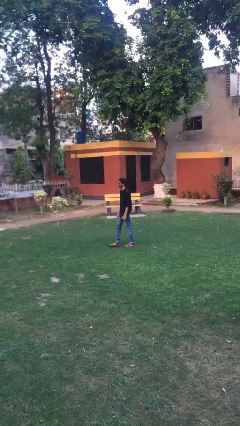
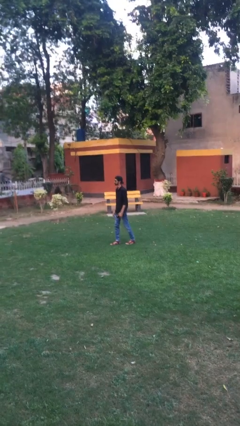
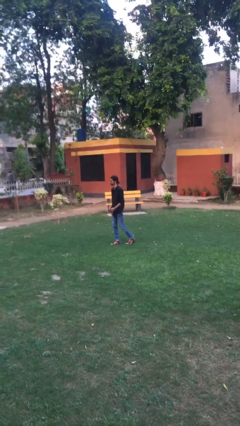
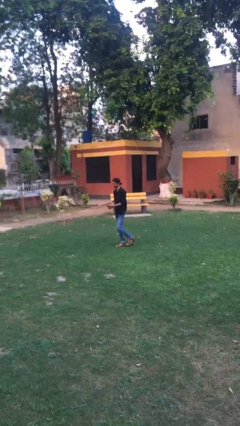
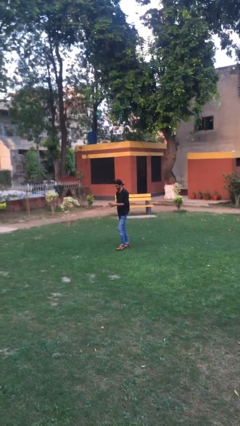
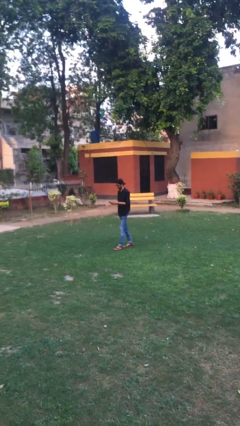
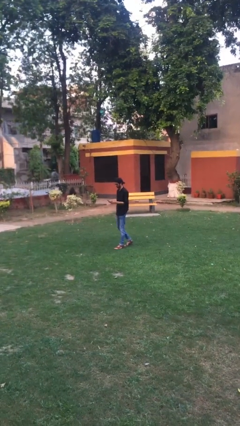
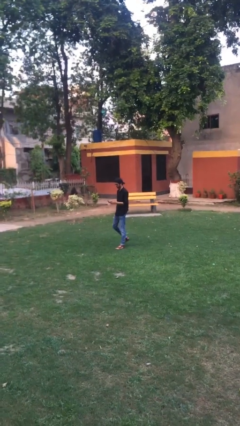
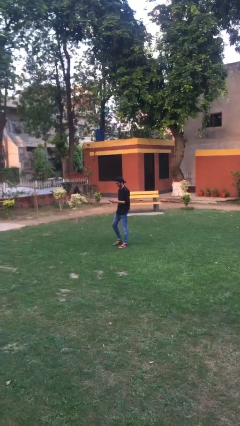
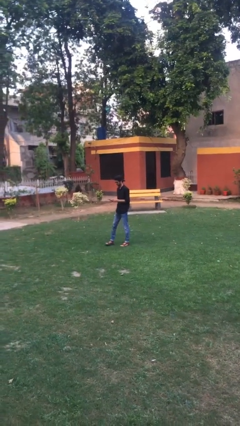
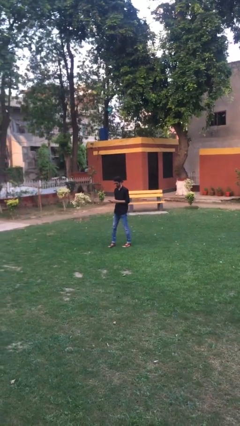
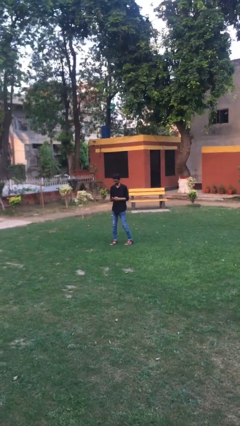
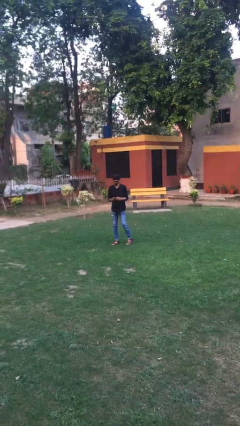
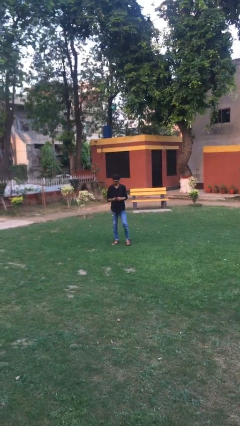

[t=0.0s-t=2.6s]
person texts on phone

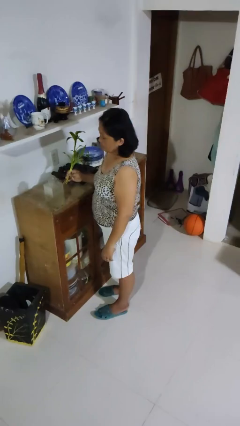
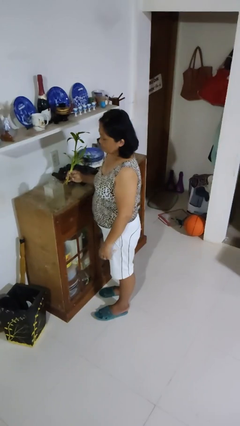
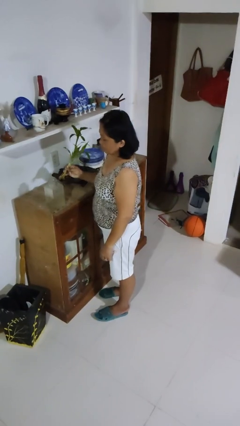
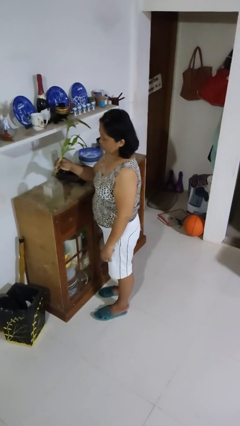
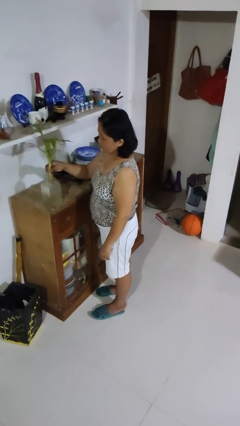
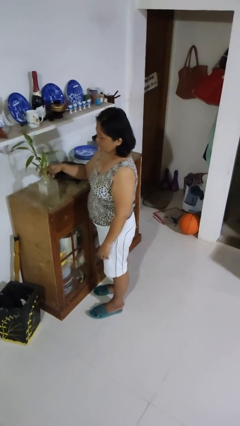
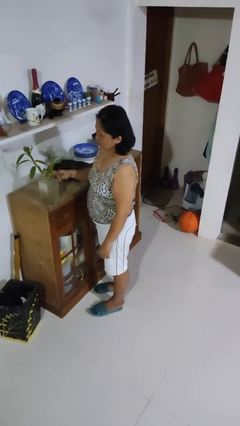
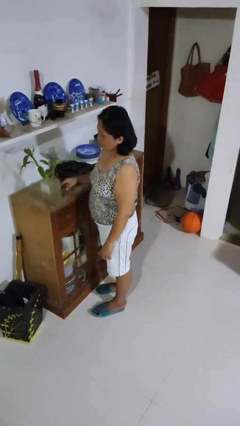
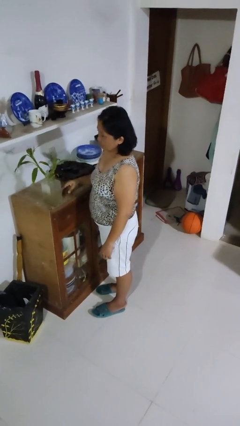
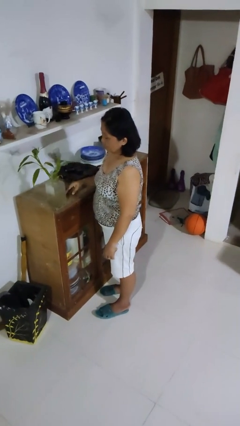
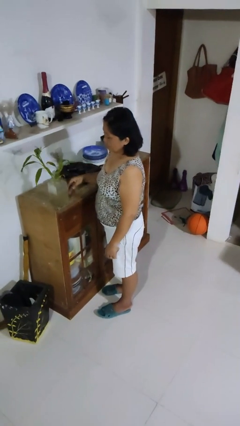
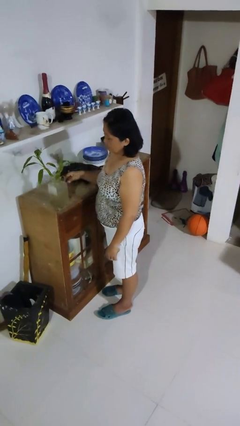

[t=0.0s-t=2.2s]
person arranges flowers in vase

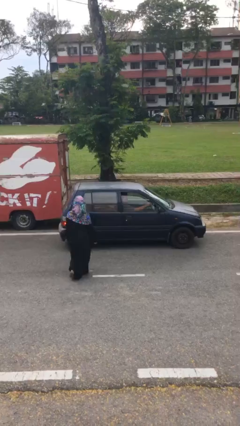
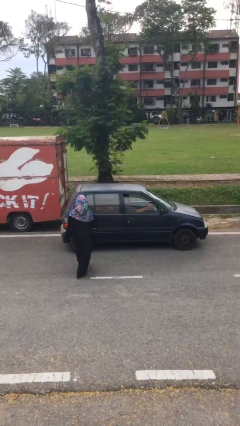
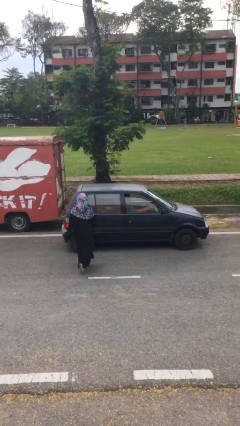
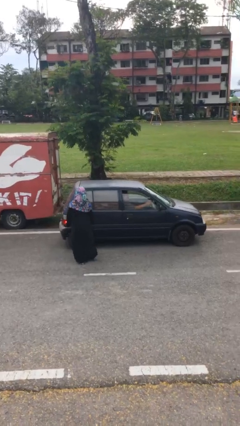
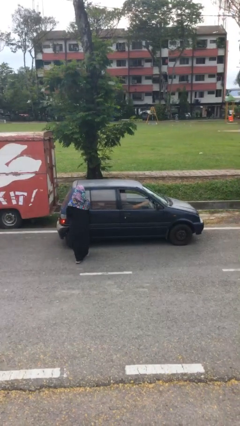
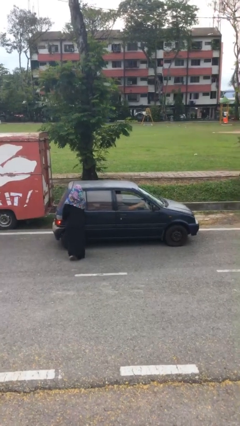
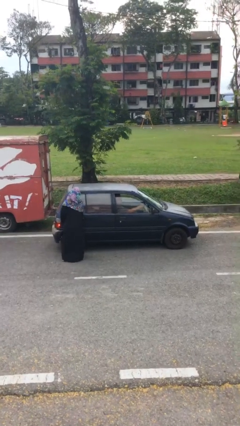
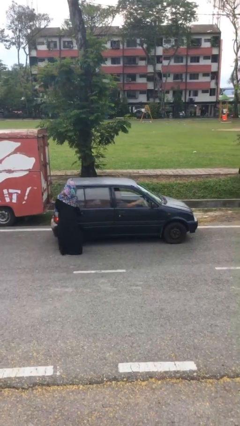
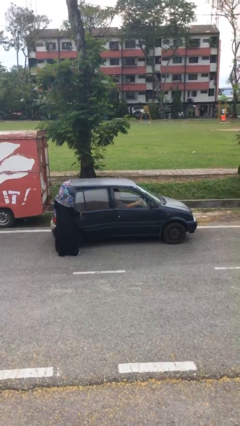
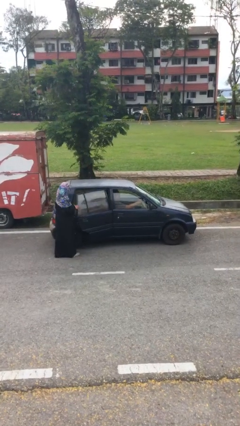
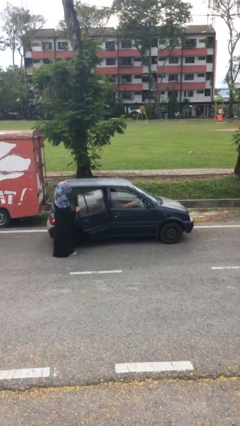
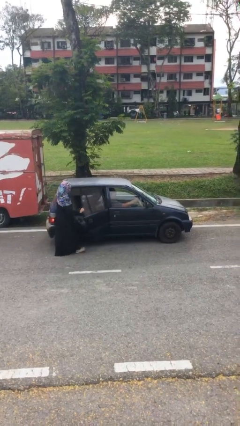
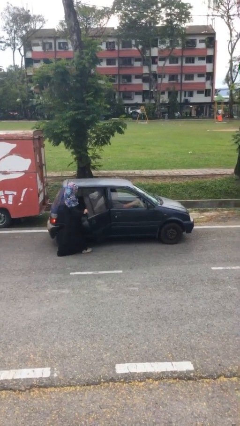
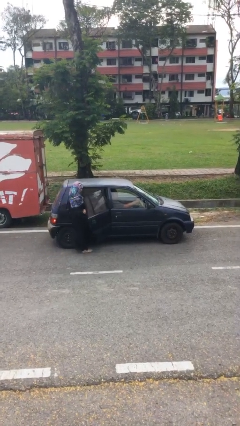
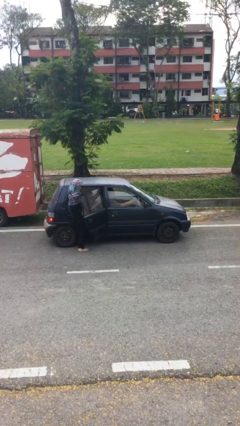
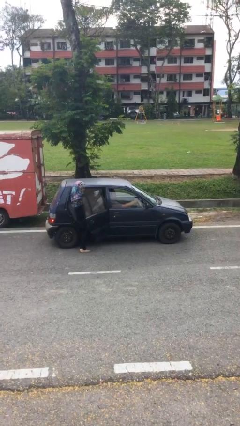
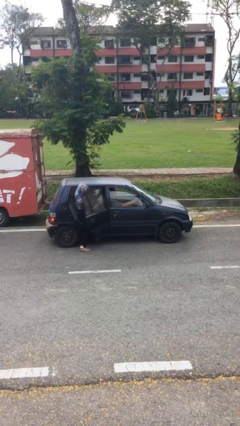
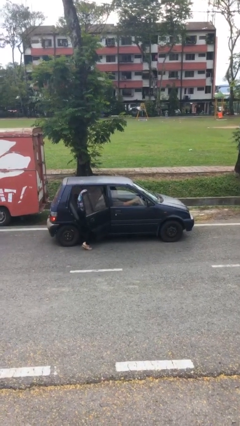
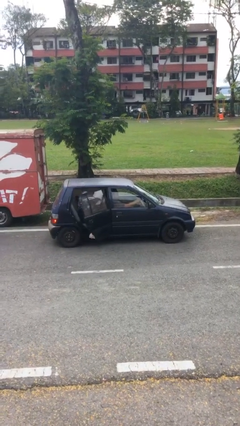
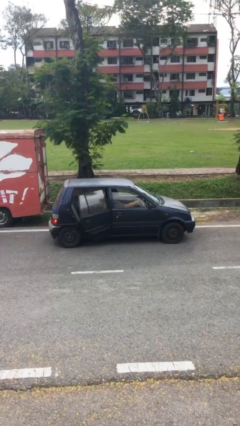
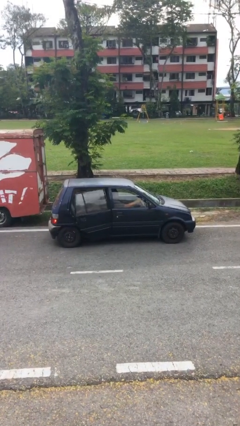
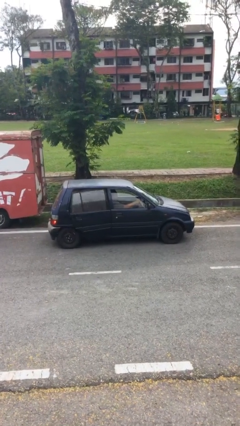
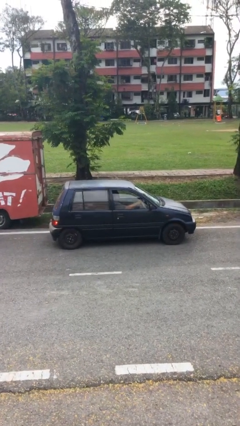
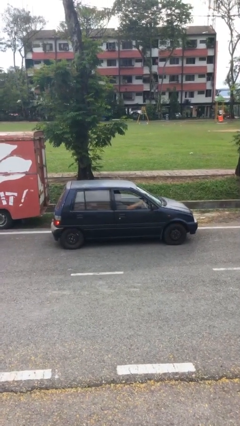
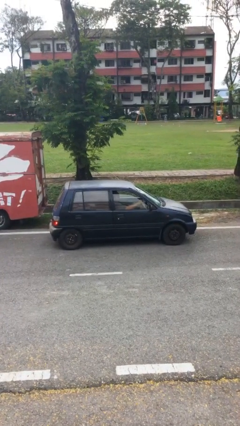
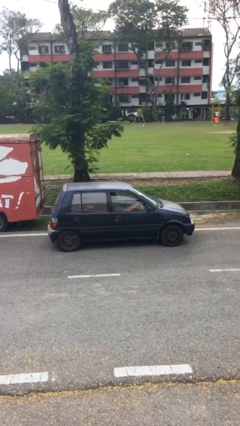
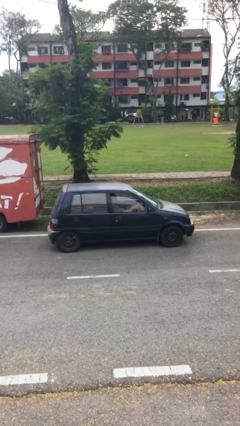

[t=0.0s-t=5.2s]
car picks up person

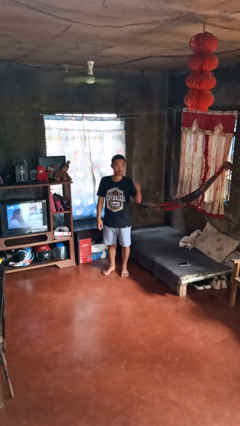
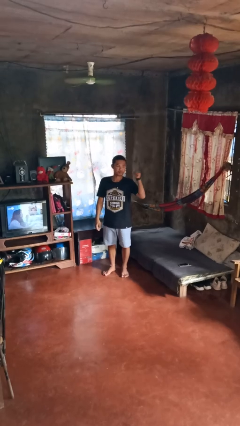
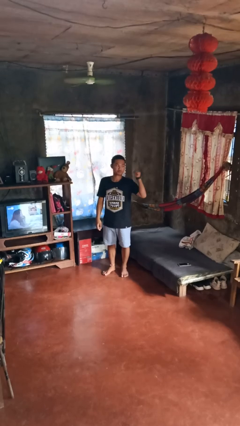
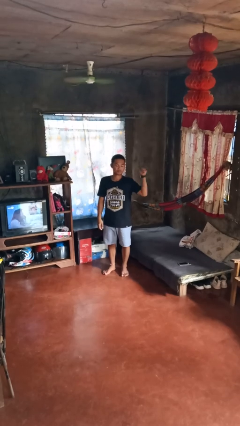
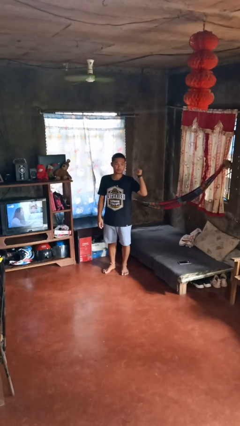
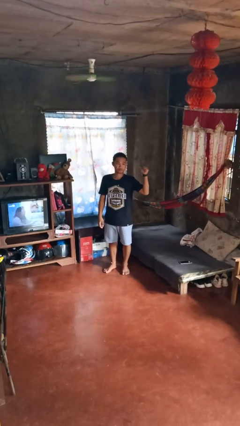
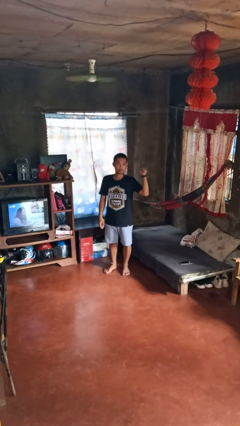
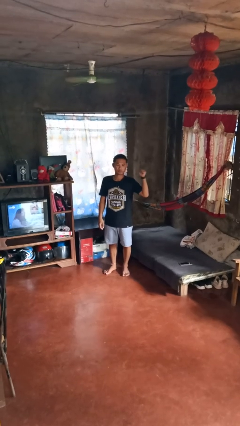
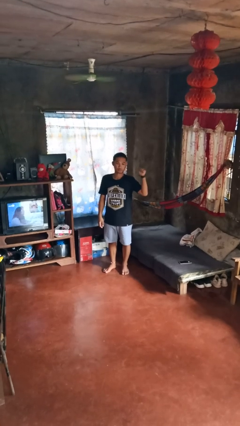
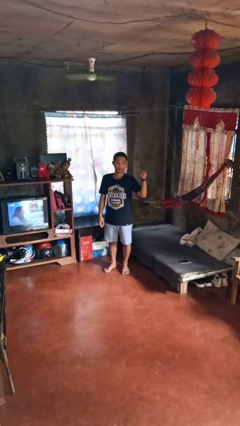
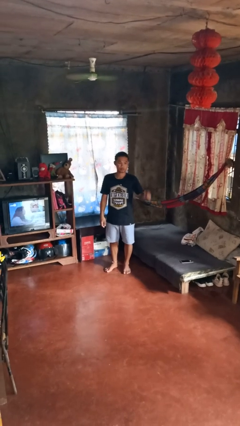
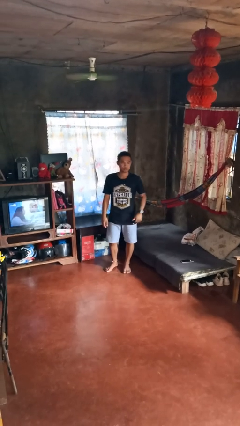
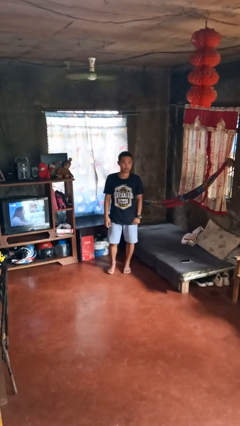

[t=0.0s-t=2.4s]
person gestures behind me

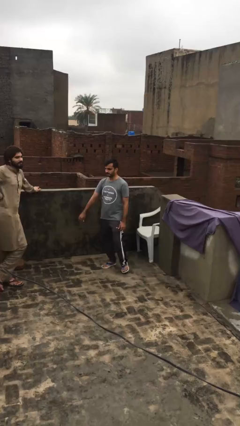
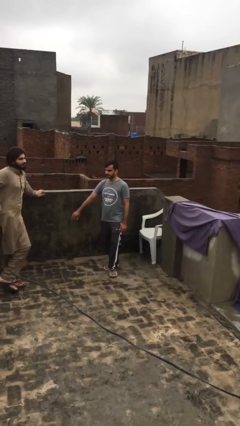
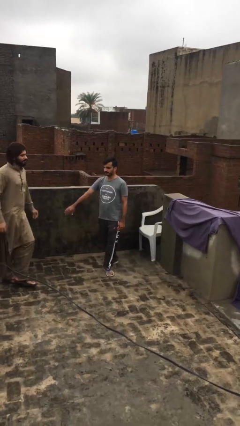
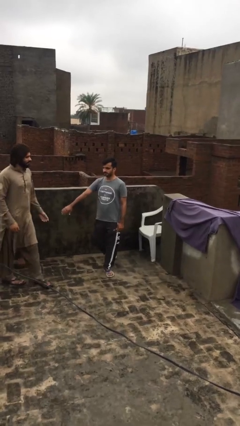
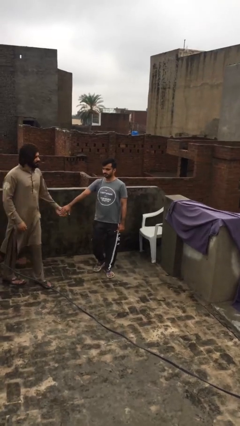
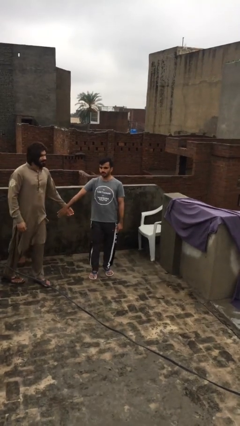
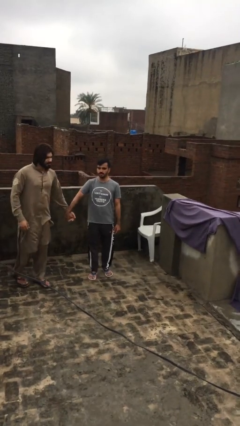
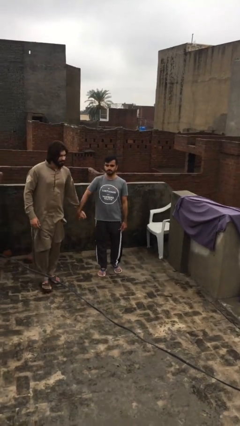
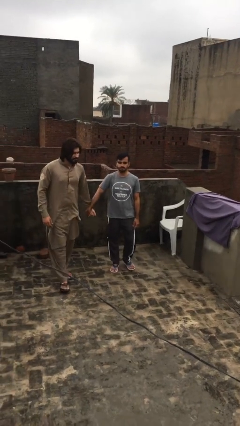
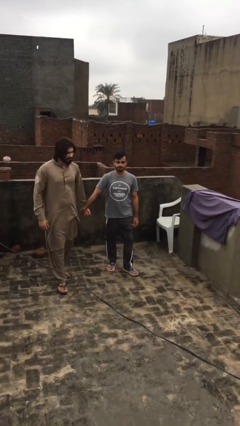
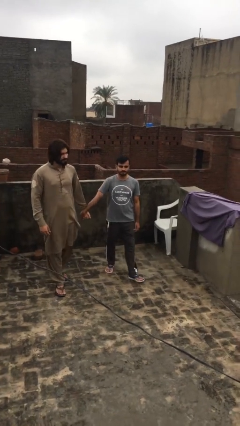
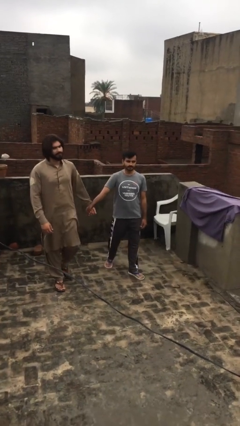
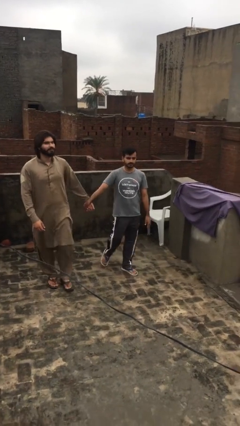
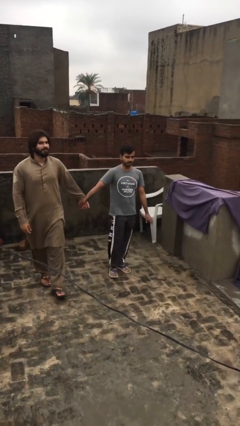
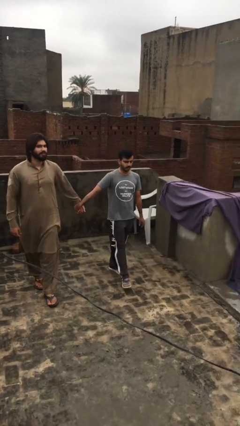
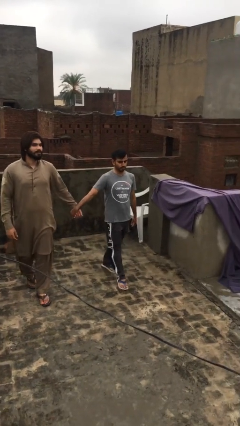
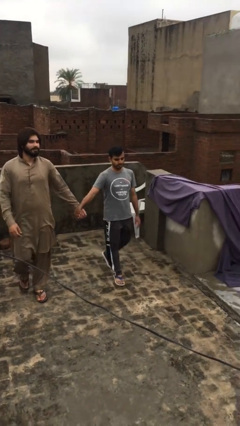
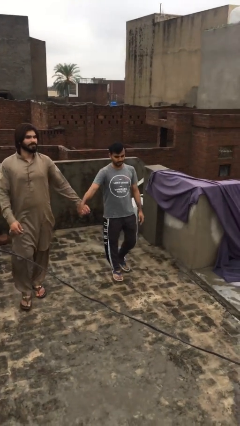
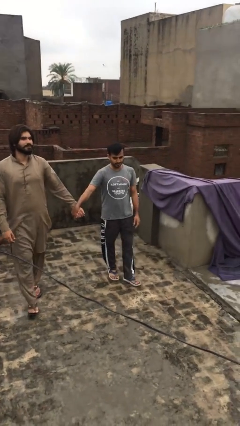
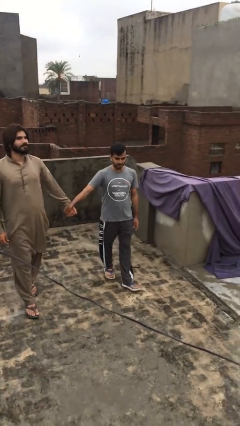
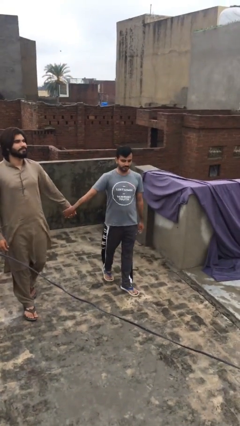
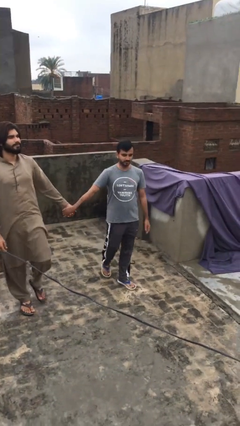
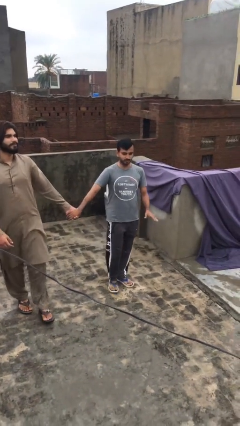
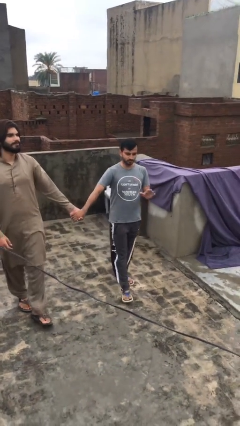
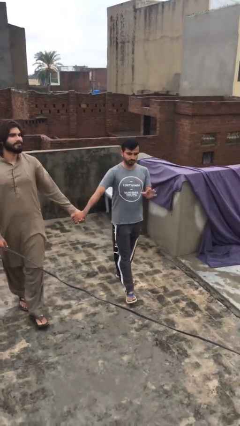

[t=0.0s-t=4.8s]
person holds hand

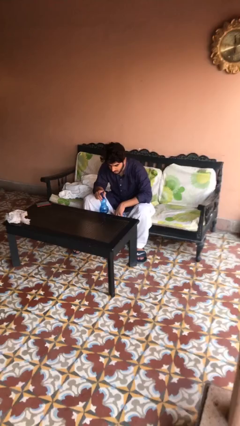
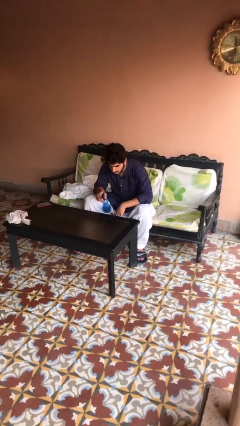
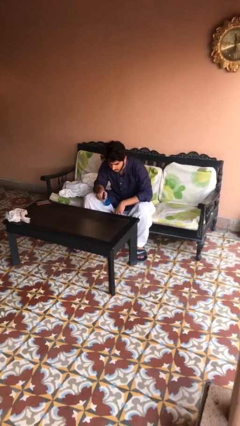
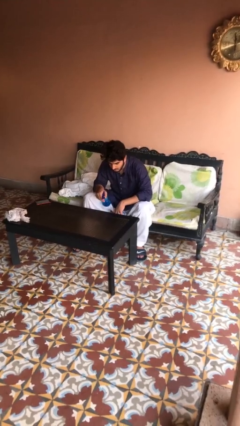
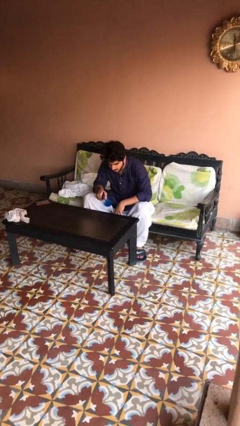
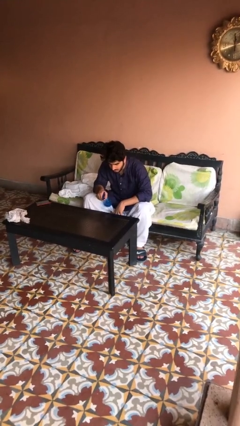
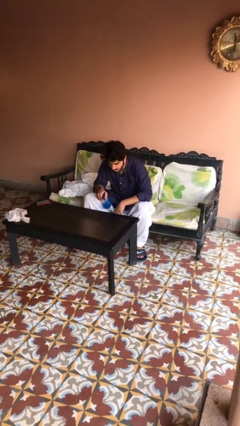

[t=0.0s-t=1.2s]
person sprays from bottle
